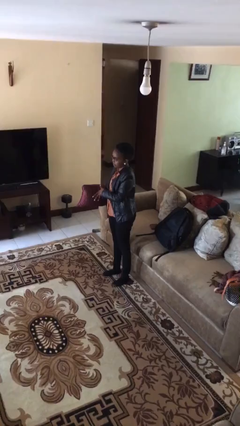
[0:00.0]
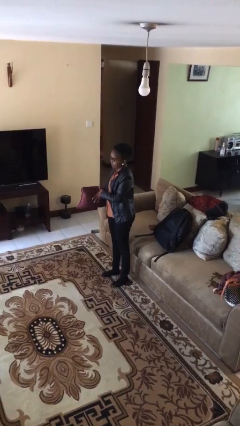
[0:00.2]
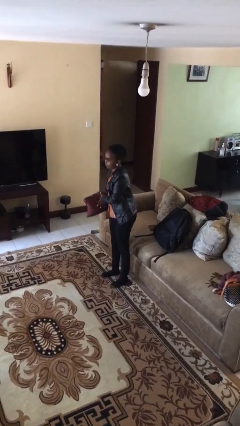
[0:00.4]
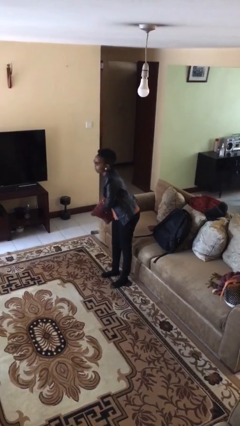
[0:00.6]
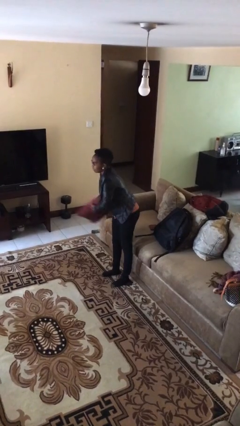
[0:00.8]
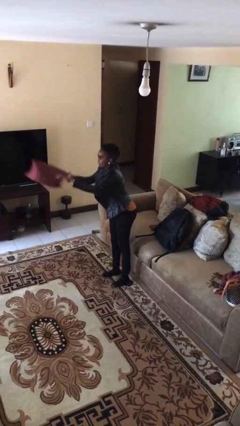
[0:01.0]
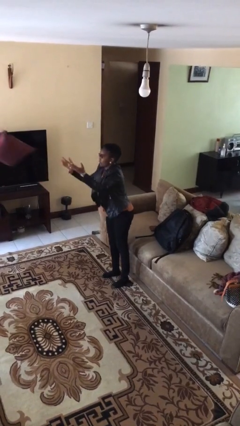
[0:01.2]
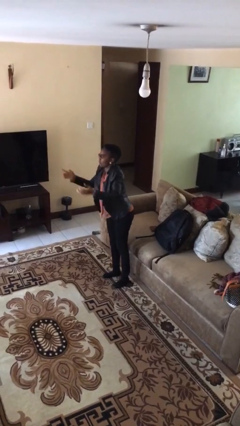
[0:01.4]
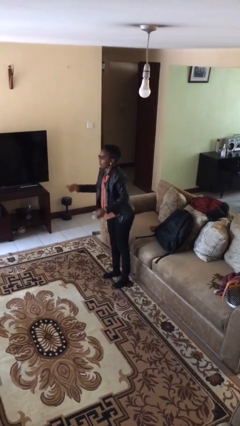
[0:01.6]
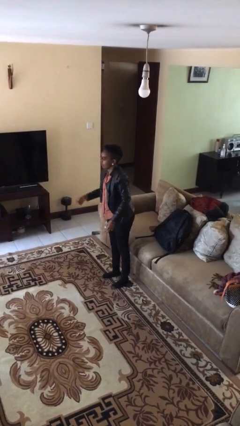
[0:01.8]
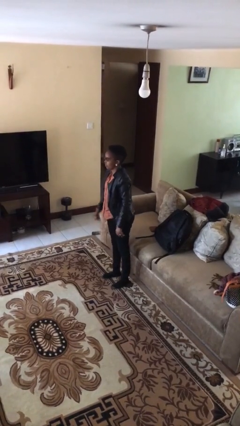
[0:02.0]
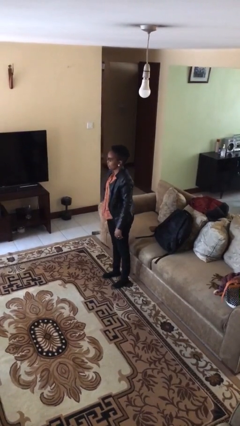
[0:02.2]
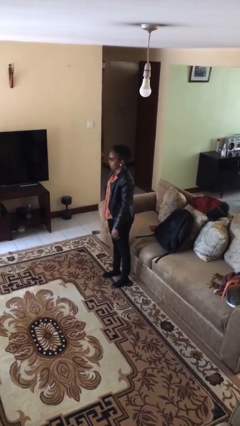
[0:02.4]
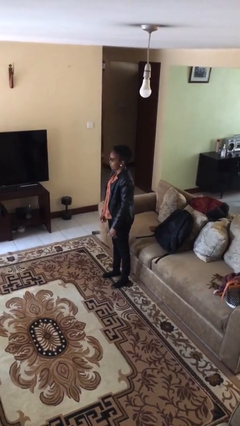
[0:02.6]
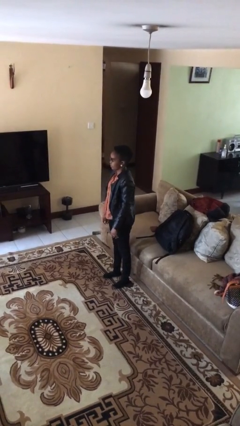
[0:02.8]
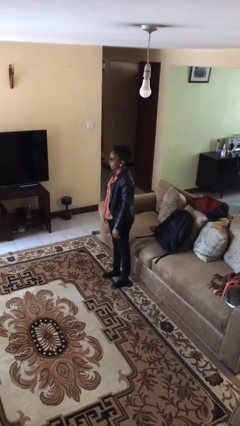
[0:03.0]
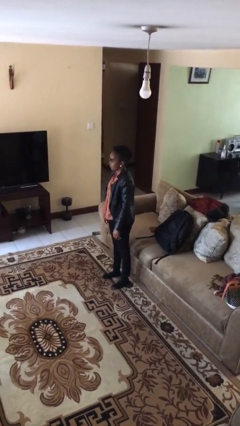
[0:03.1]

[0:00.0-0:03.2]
person throws object to person

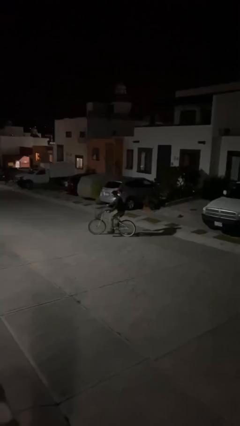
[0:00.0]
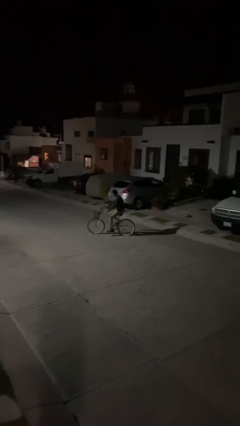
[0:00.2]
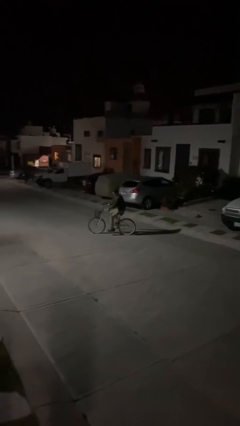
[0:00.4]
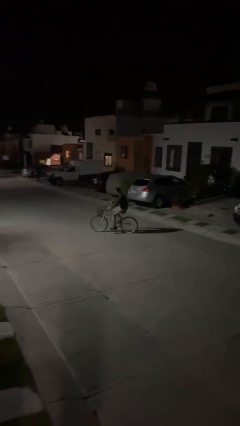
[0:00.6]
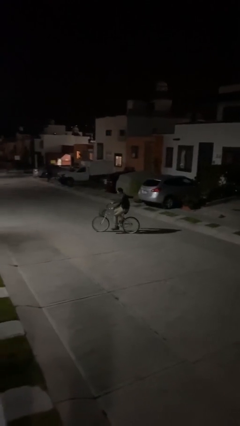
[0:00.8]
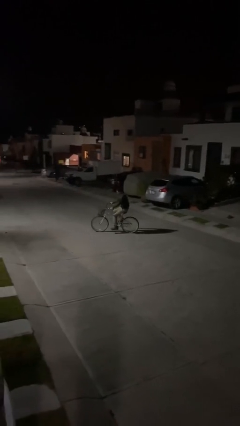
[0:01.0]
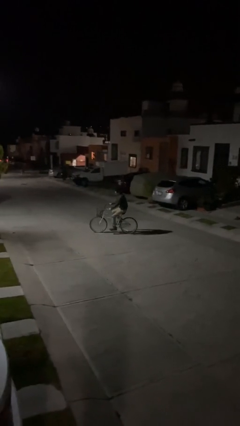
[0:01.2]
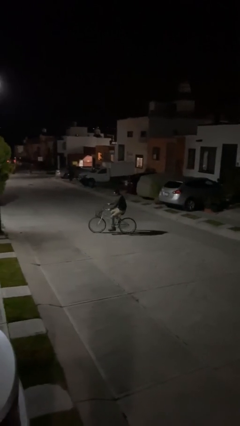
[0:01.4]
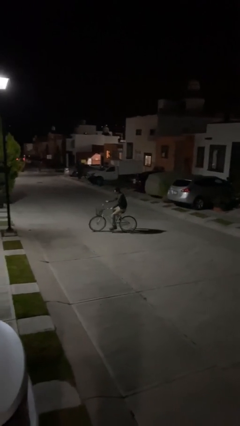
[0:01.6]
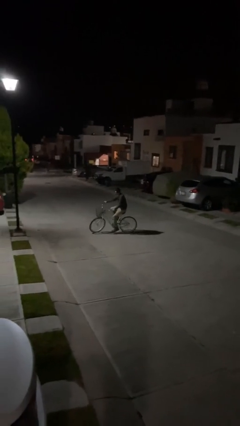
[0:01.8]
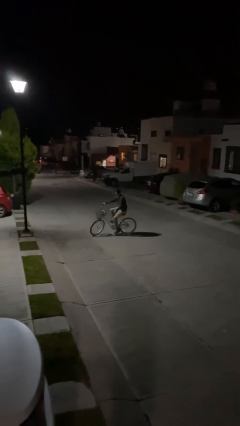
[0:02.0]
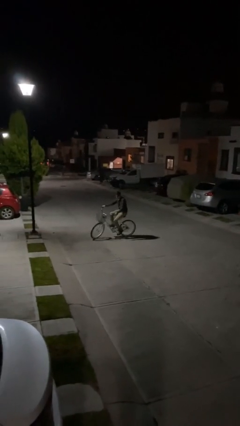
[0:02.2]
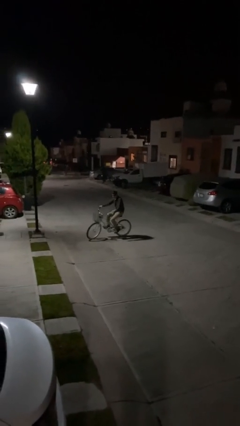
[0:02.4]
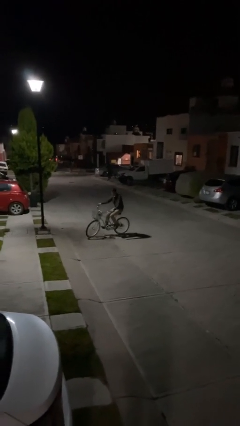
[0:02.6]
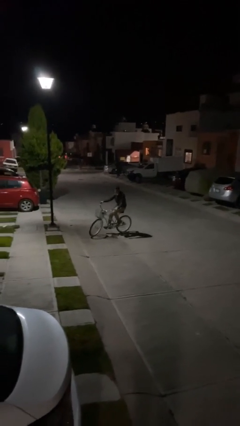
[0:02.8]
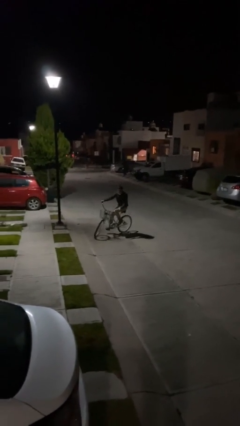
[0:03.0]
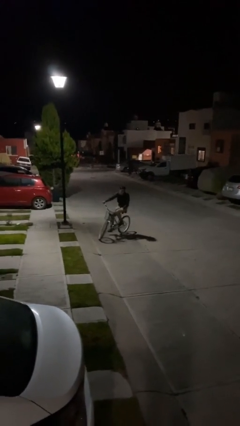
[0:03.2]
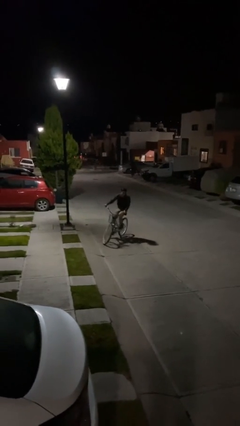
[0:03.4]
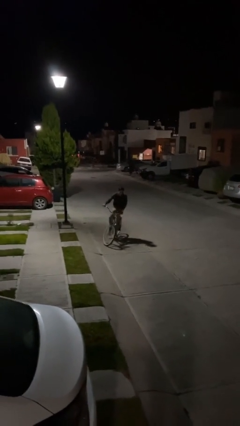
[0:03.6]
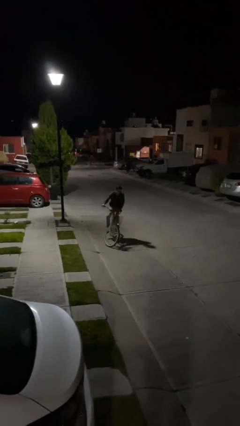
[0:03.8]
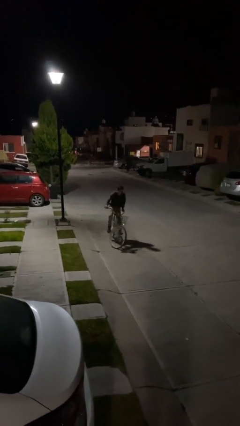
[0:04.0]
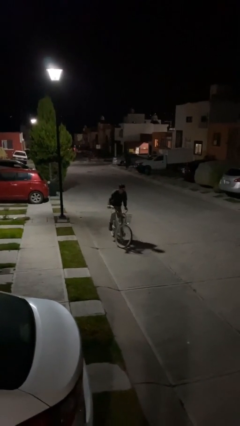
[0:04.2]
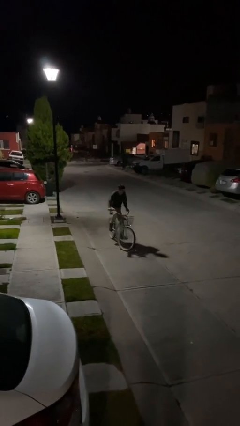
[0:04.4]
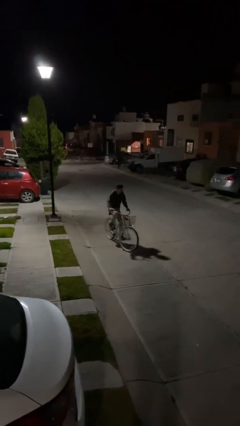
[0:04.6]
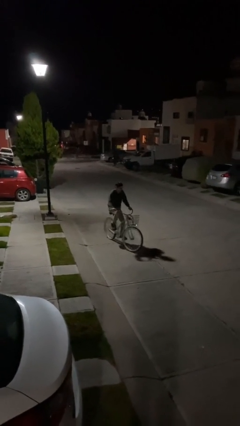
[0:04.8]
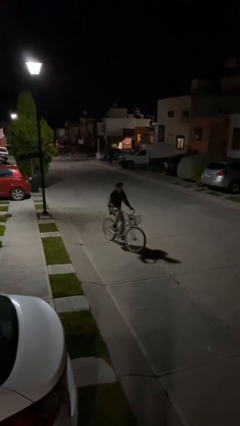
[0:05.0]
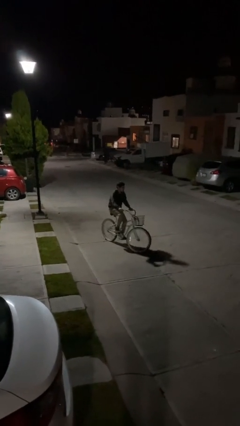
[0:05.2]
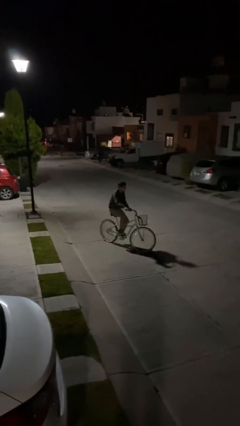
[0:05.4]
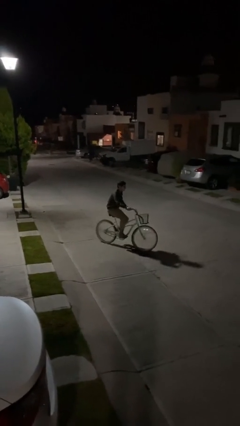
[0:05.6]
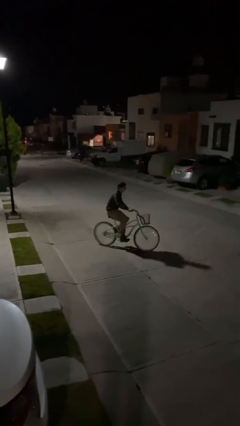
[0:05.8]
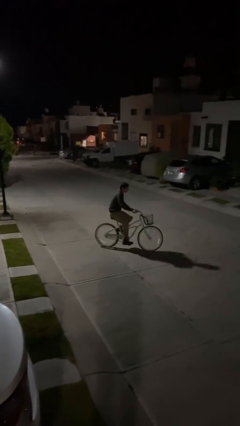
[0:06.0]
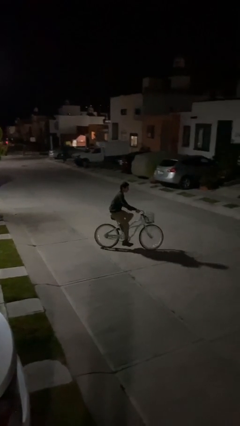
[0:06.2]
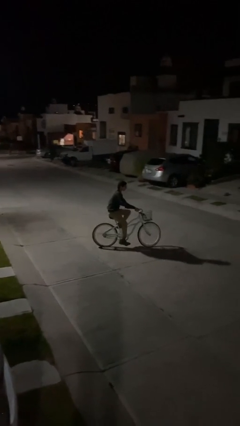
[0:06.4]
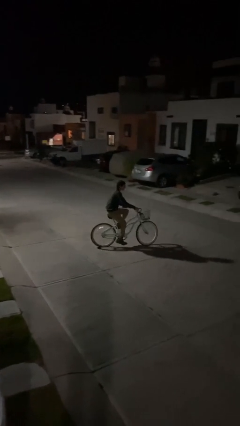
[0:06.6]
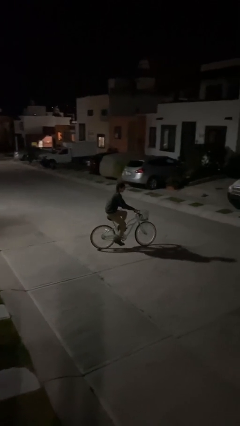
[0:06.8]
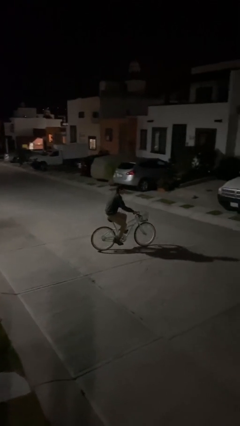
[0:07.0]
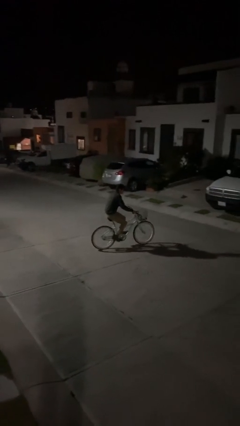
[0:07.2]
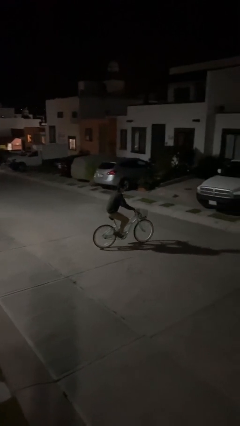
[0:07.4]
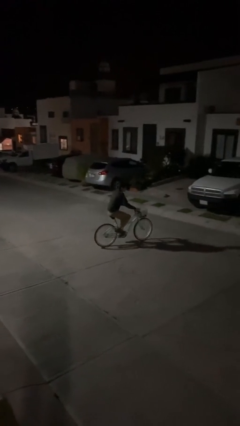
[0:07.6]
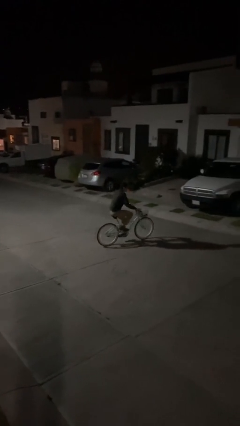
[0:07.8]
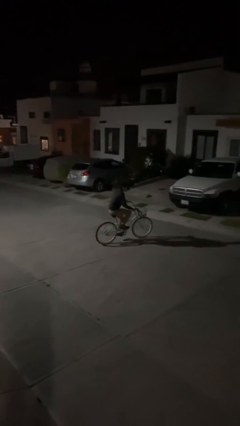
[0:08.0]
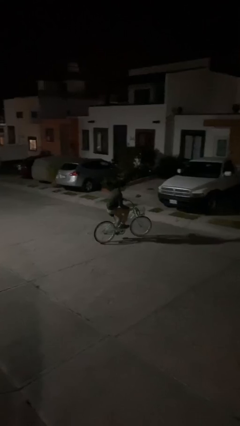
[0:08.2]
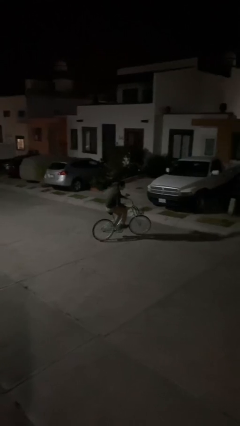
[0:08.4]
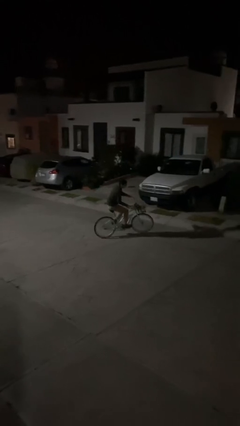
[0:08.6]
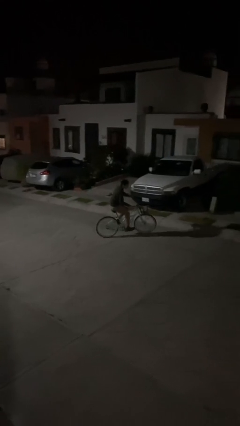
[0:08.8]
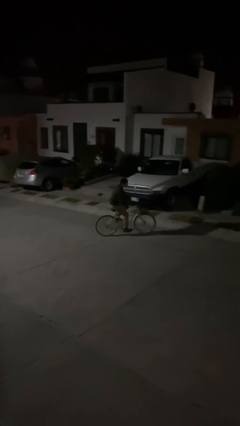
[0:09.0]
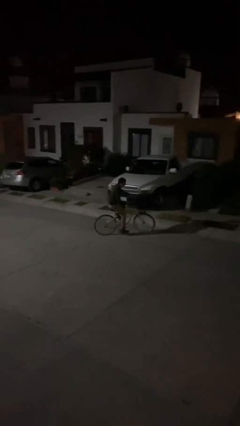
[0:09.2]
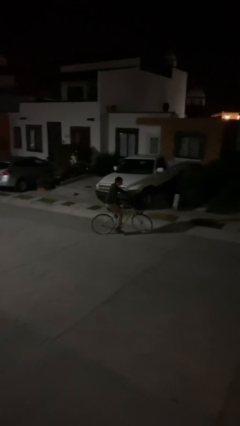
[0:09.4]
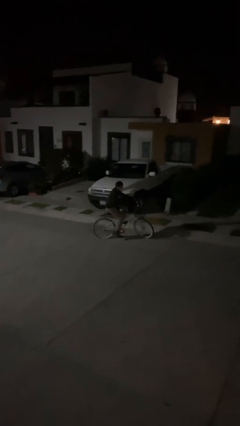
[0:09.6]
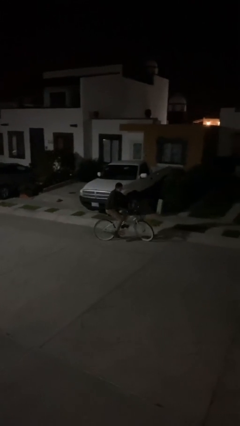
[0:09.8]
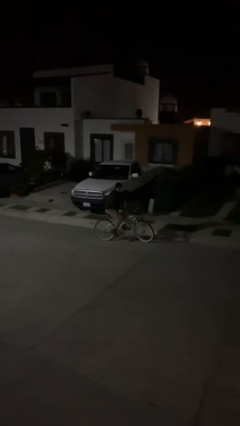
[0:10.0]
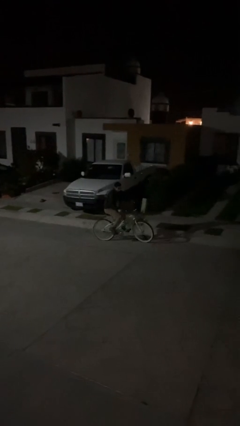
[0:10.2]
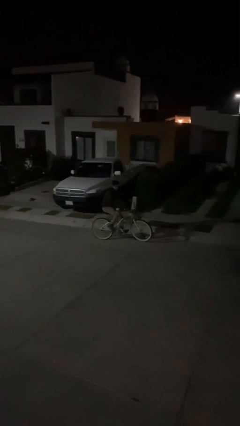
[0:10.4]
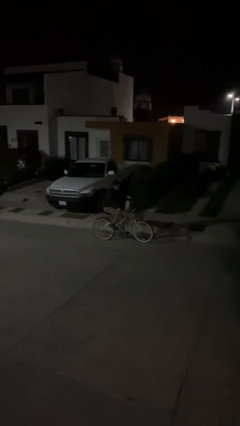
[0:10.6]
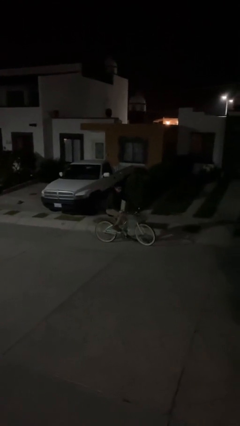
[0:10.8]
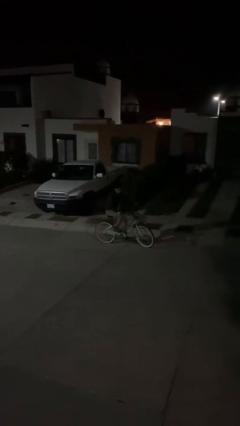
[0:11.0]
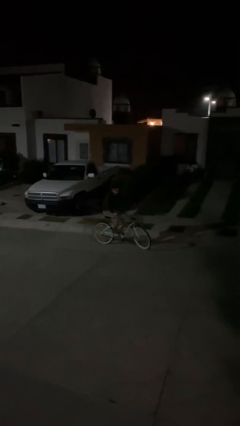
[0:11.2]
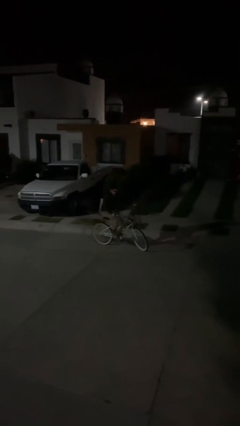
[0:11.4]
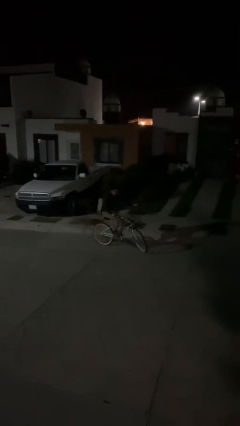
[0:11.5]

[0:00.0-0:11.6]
person rides bicycle

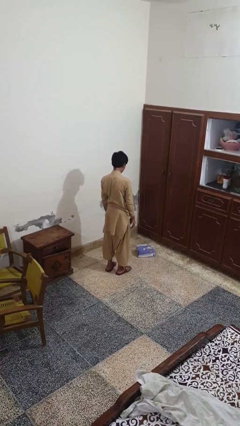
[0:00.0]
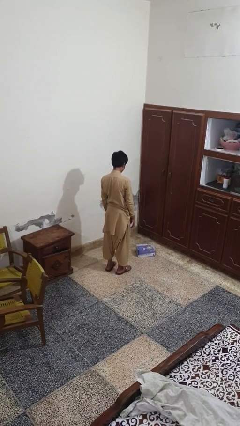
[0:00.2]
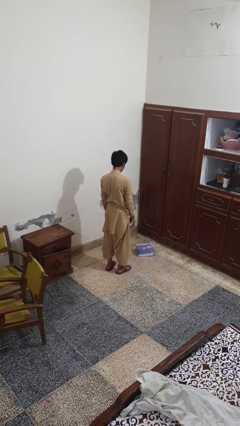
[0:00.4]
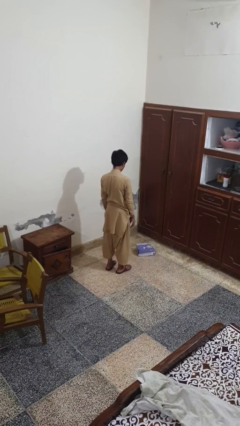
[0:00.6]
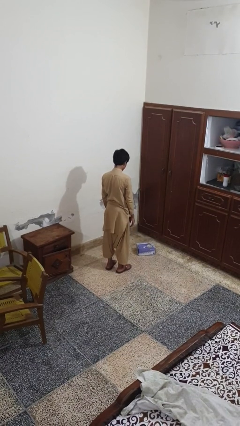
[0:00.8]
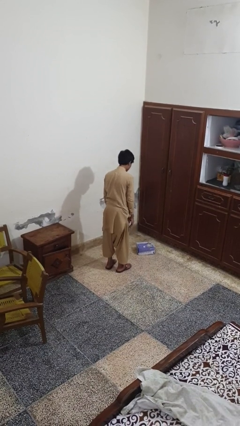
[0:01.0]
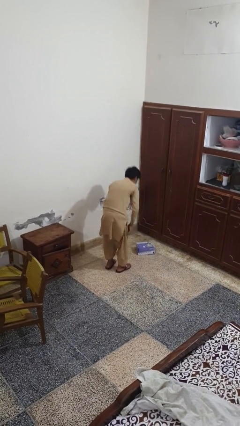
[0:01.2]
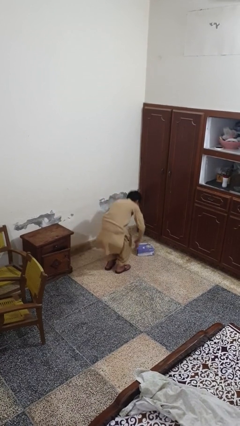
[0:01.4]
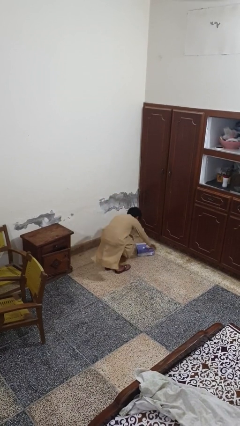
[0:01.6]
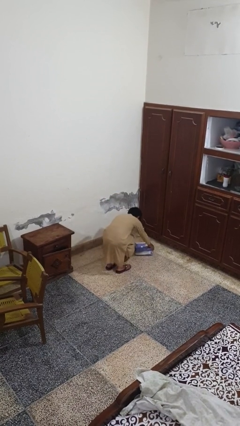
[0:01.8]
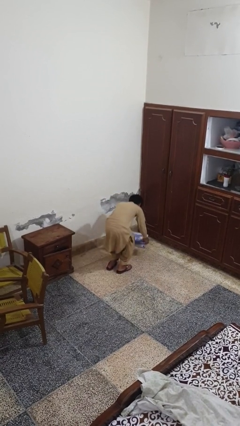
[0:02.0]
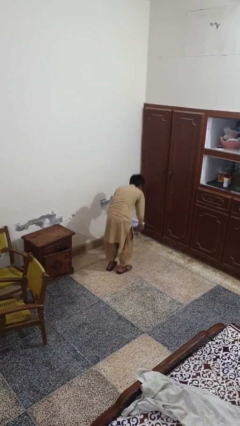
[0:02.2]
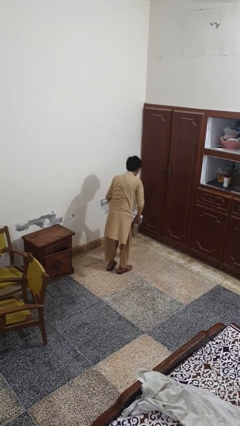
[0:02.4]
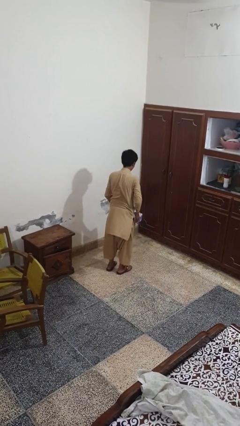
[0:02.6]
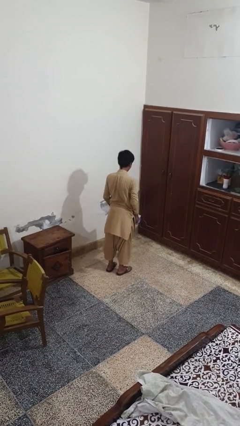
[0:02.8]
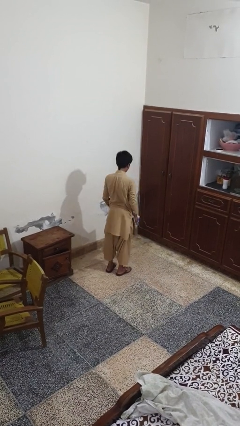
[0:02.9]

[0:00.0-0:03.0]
person picks up object from floor

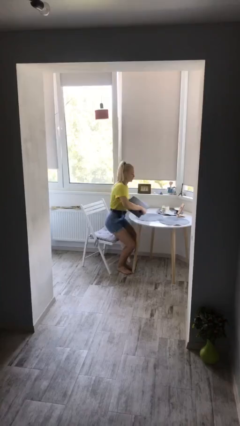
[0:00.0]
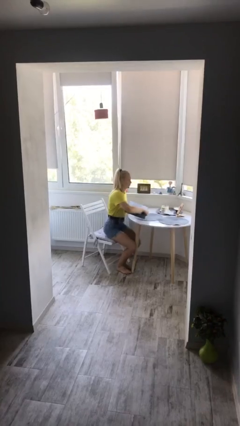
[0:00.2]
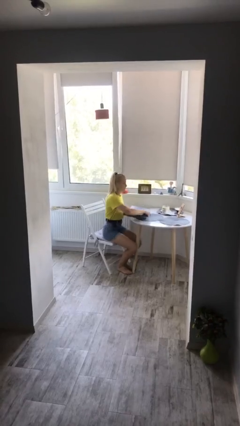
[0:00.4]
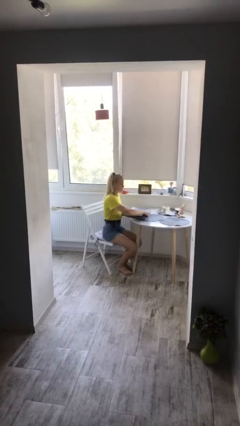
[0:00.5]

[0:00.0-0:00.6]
person sits down
